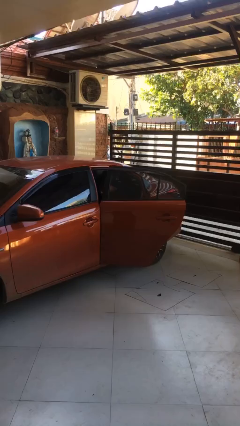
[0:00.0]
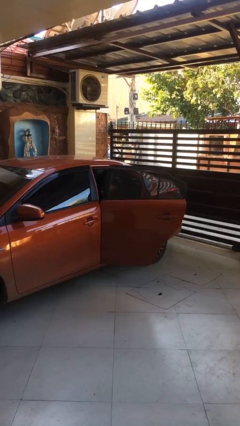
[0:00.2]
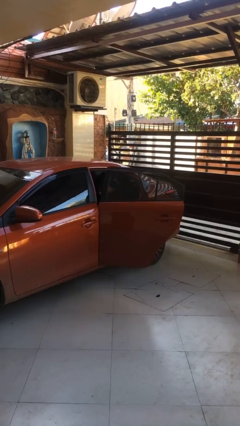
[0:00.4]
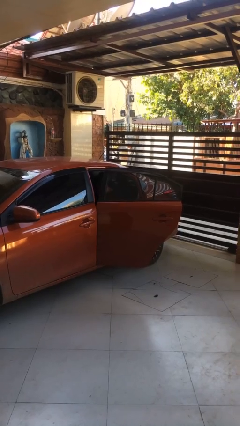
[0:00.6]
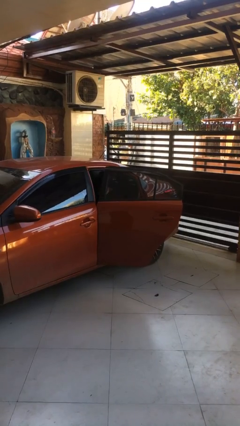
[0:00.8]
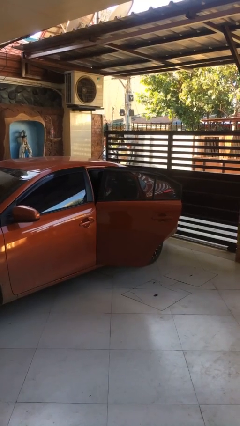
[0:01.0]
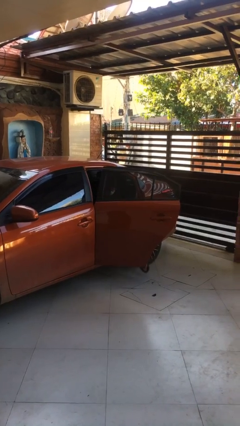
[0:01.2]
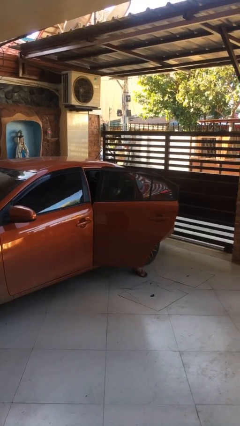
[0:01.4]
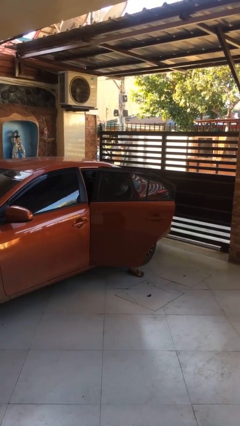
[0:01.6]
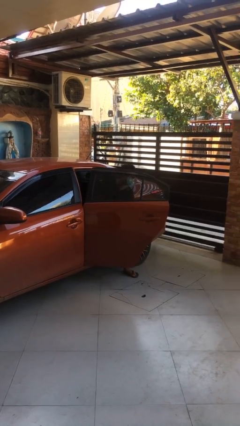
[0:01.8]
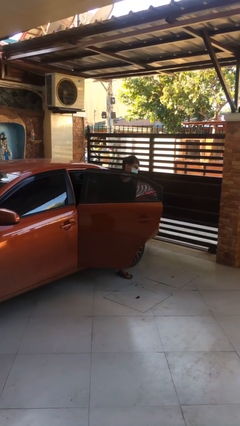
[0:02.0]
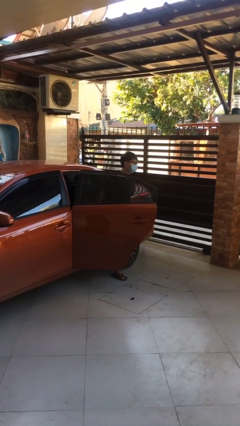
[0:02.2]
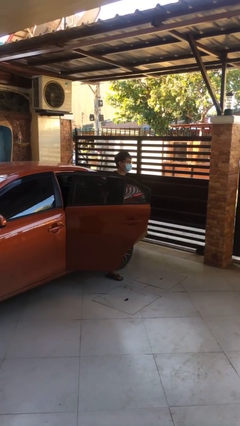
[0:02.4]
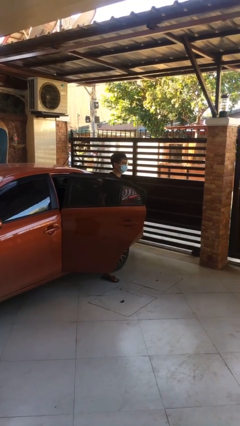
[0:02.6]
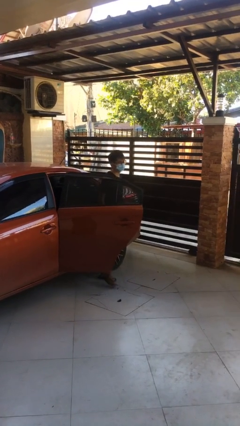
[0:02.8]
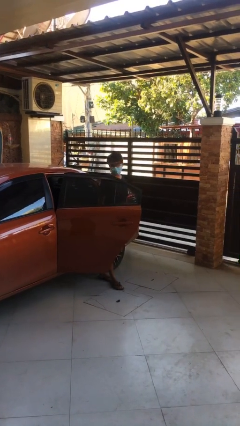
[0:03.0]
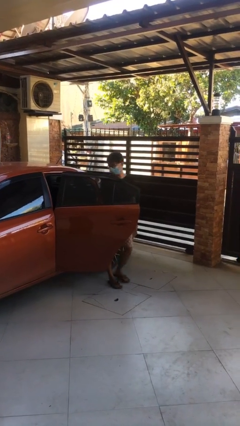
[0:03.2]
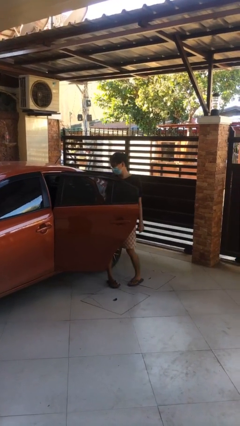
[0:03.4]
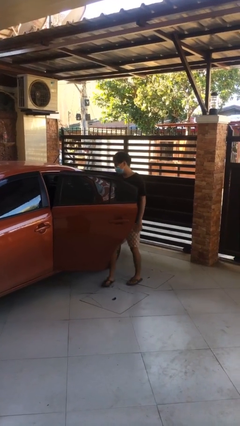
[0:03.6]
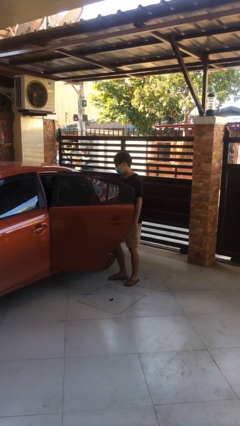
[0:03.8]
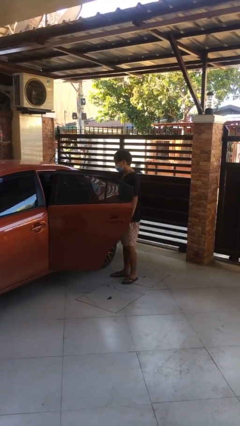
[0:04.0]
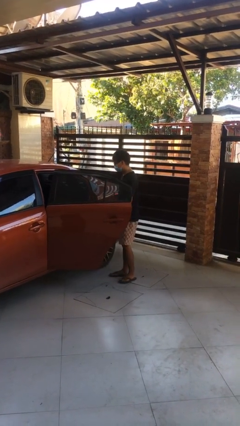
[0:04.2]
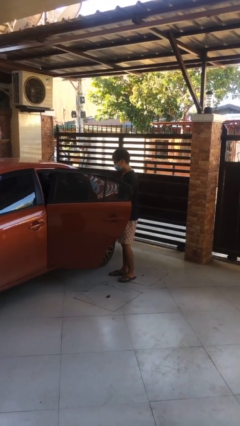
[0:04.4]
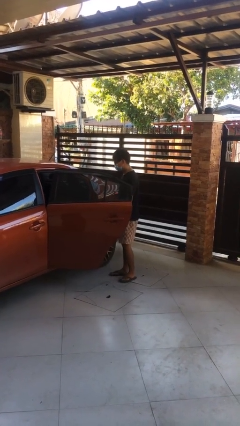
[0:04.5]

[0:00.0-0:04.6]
person exits car

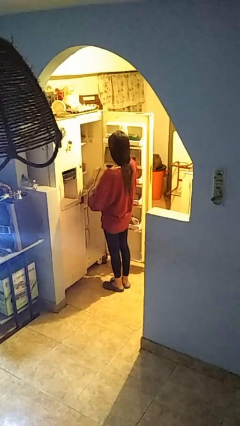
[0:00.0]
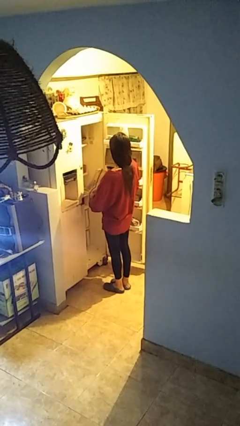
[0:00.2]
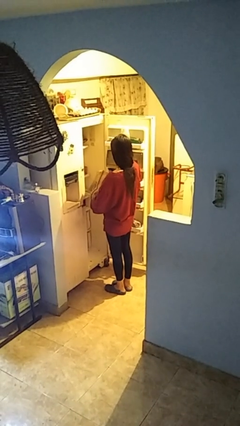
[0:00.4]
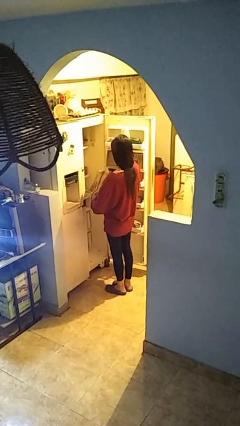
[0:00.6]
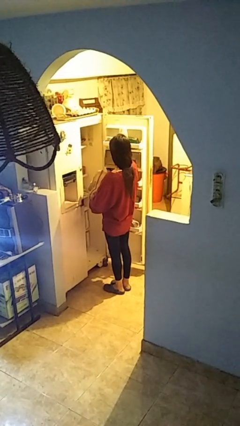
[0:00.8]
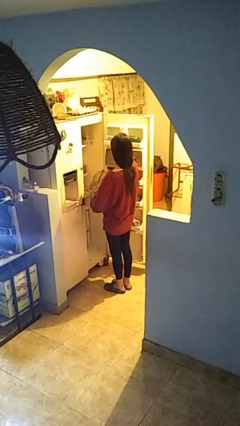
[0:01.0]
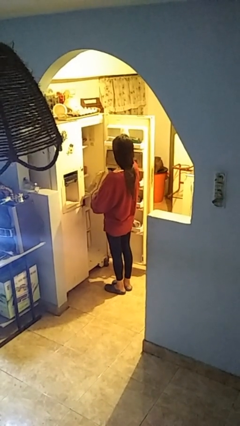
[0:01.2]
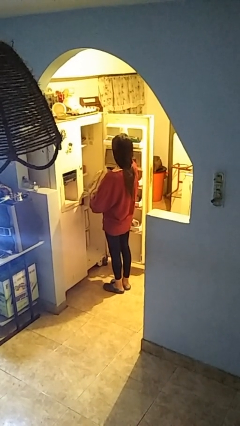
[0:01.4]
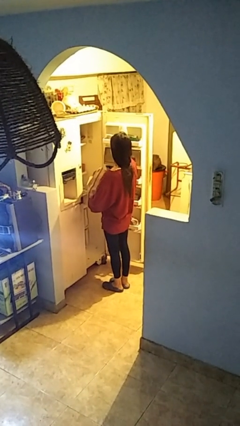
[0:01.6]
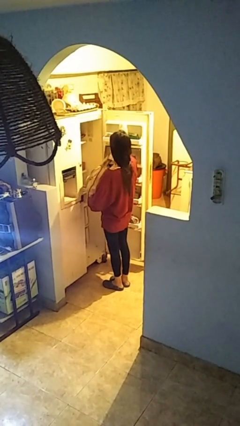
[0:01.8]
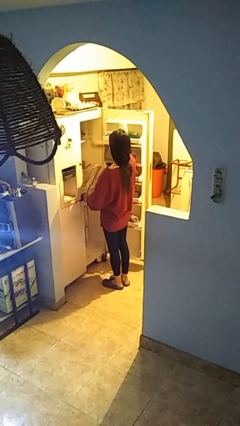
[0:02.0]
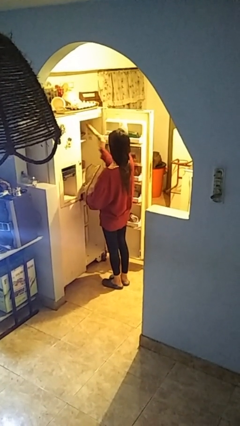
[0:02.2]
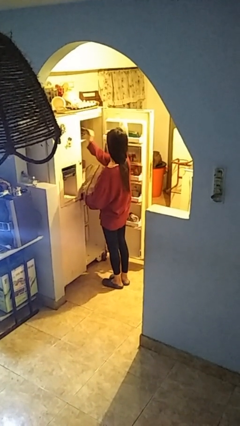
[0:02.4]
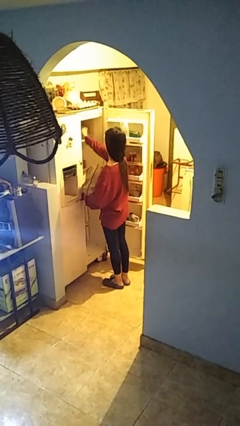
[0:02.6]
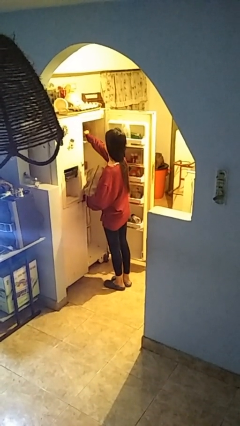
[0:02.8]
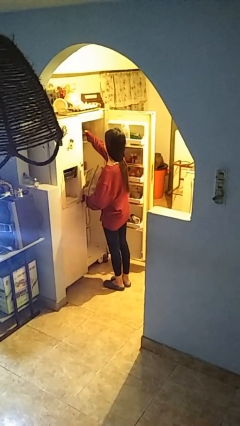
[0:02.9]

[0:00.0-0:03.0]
person loads groceries into refrigerator

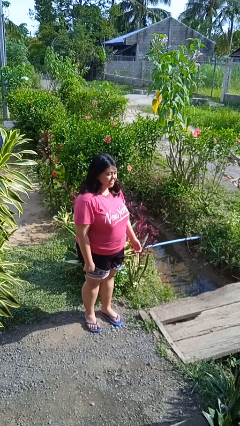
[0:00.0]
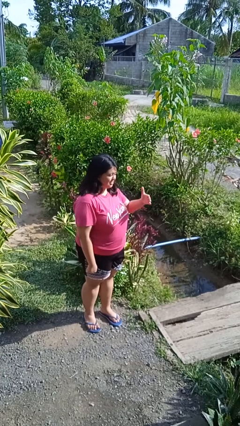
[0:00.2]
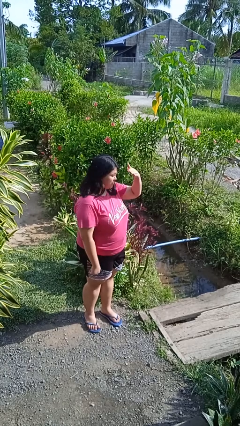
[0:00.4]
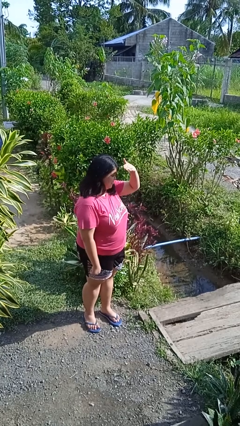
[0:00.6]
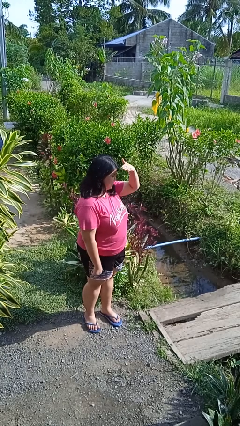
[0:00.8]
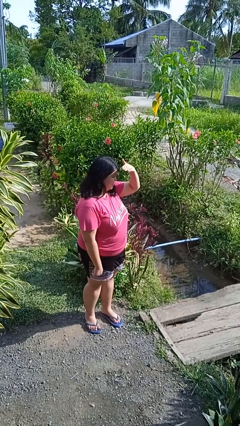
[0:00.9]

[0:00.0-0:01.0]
person shades eyes

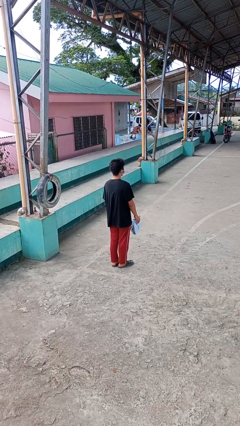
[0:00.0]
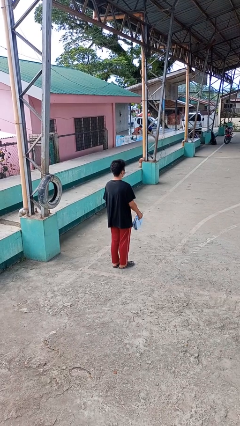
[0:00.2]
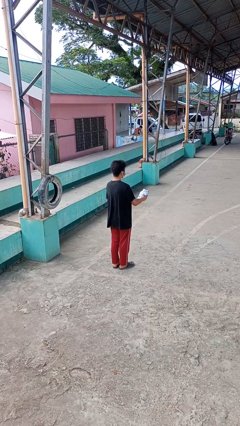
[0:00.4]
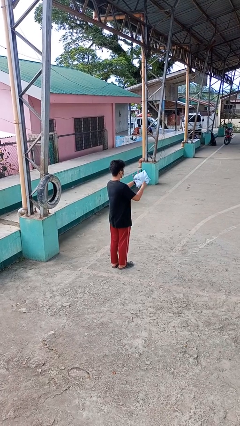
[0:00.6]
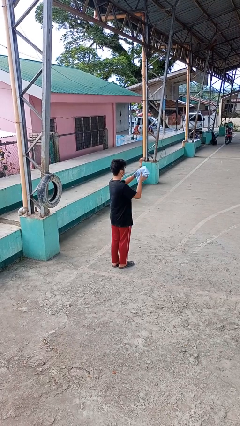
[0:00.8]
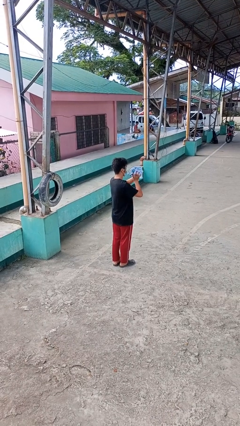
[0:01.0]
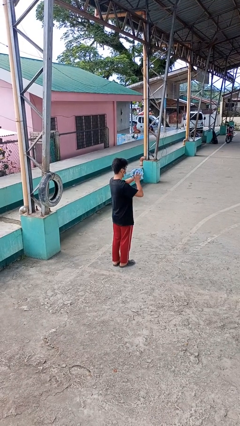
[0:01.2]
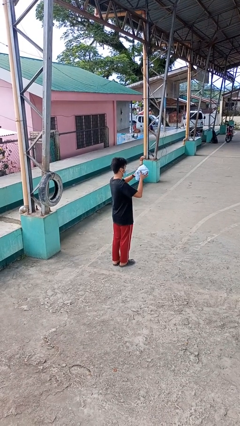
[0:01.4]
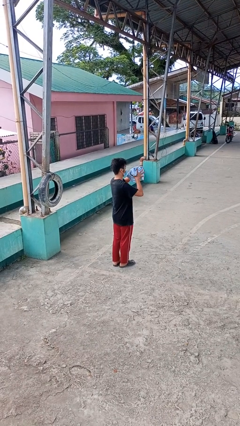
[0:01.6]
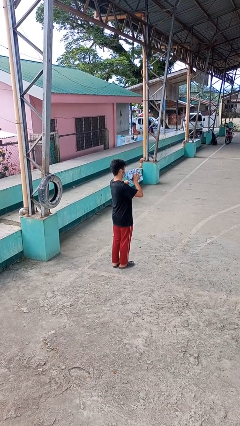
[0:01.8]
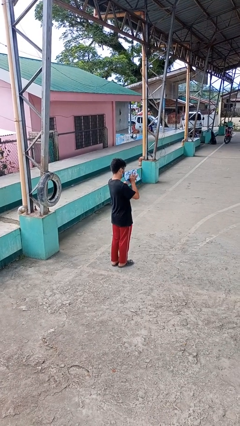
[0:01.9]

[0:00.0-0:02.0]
person squeezes object

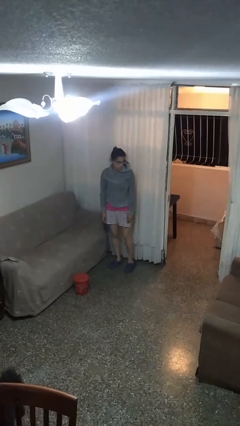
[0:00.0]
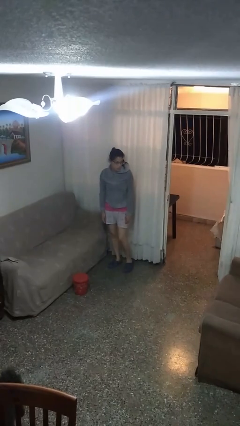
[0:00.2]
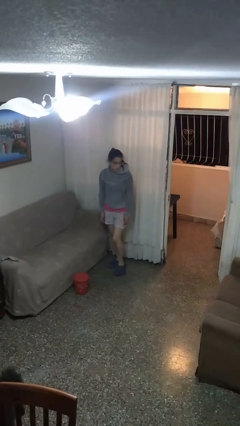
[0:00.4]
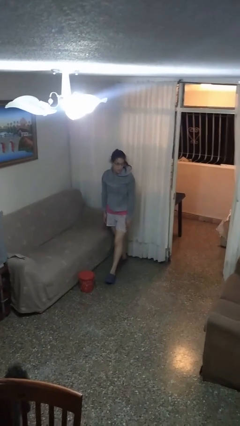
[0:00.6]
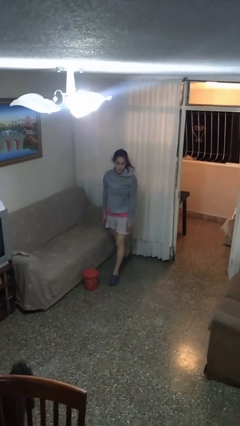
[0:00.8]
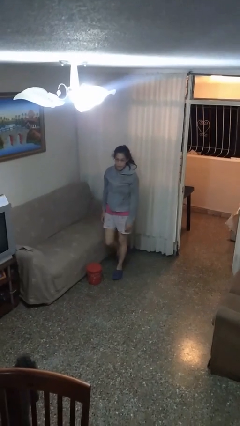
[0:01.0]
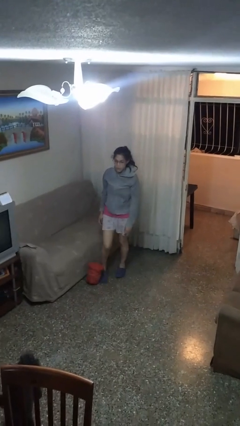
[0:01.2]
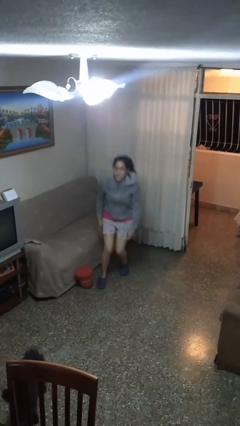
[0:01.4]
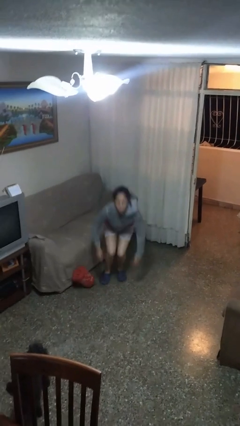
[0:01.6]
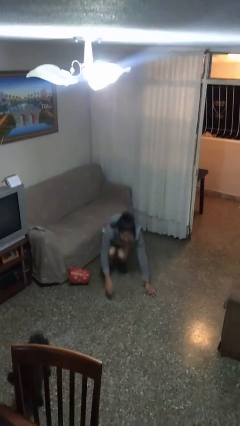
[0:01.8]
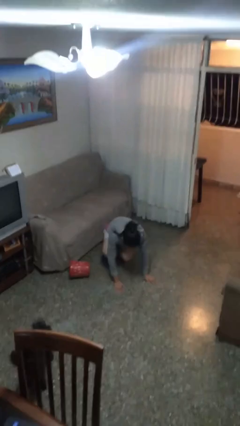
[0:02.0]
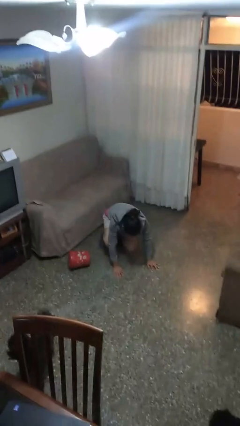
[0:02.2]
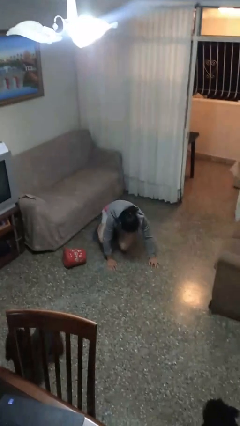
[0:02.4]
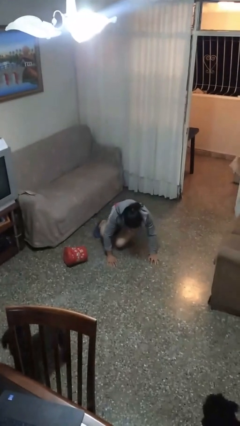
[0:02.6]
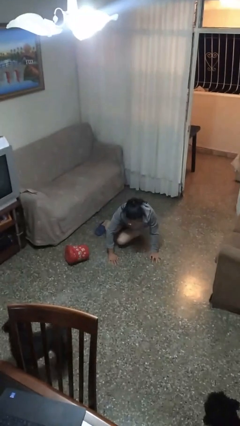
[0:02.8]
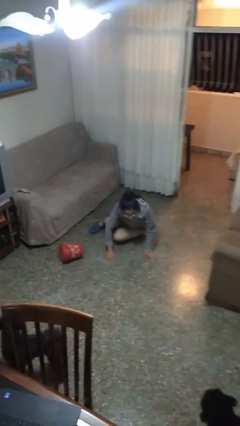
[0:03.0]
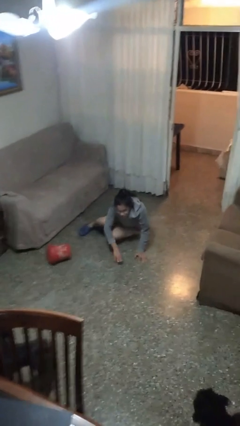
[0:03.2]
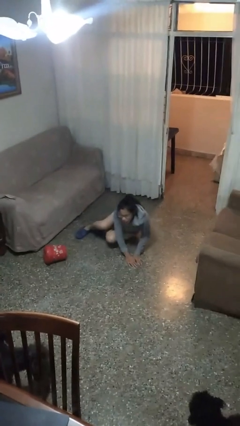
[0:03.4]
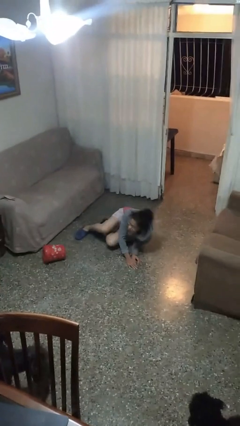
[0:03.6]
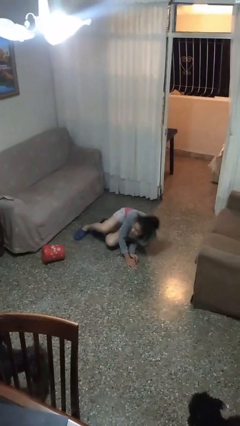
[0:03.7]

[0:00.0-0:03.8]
person trips on object on floor

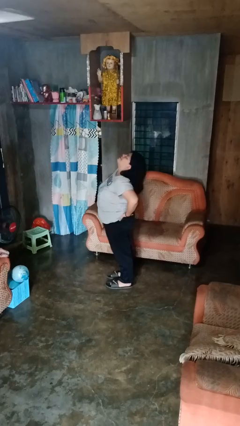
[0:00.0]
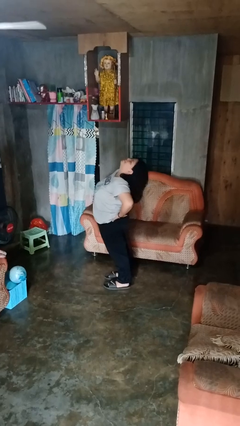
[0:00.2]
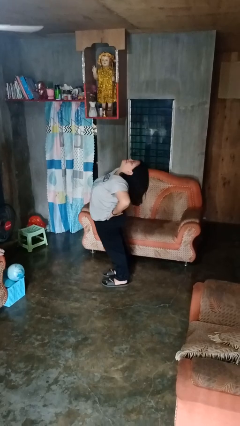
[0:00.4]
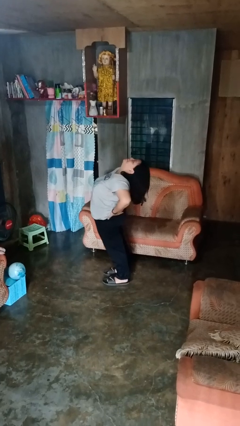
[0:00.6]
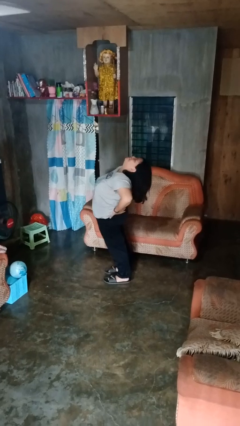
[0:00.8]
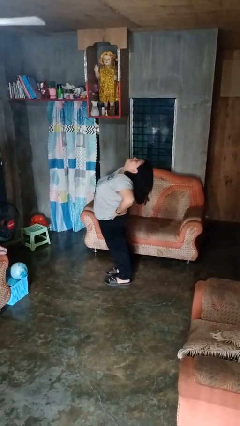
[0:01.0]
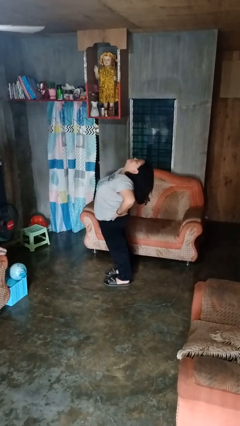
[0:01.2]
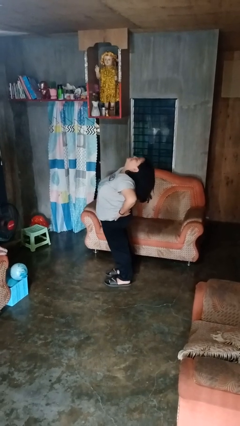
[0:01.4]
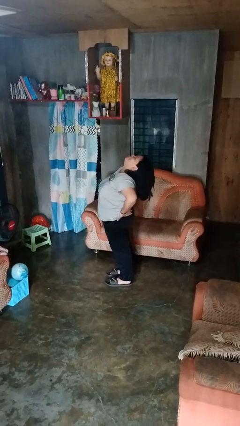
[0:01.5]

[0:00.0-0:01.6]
person stretches back

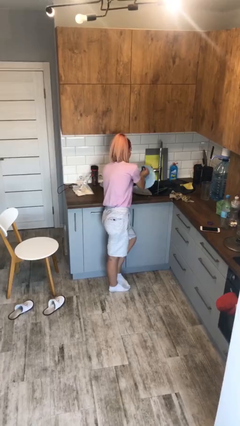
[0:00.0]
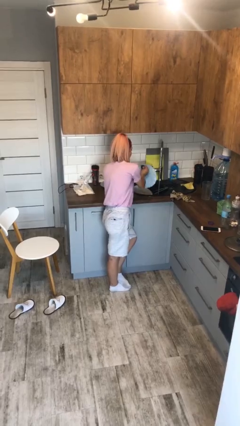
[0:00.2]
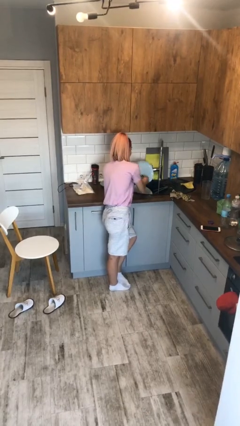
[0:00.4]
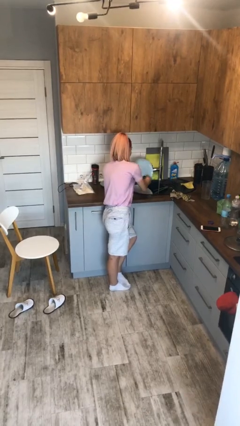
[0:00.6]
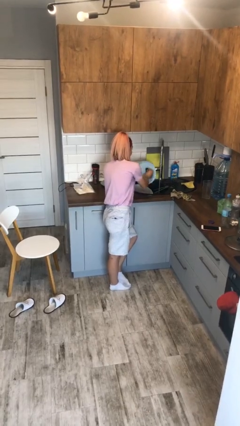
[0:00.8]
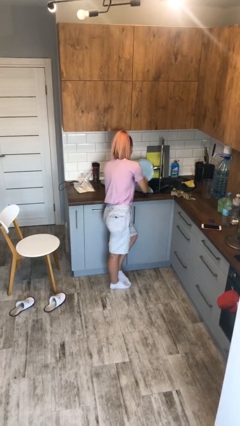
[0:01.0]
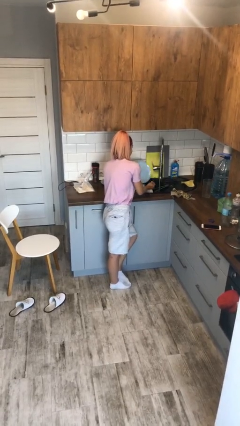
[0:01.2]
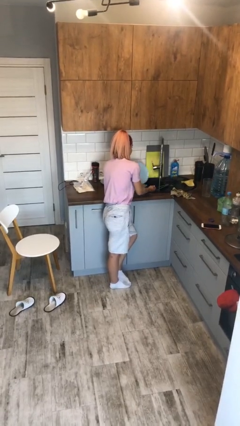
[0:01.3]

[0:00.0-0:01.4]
person washes dish
